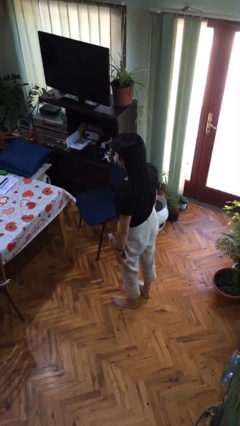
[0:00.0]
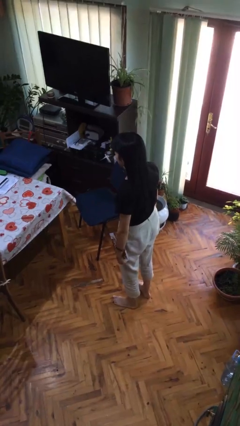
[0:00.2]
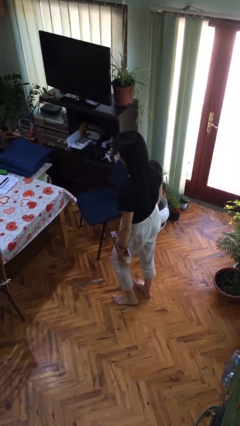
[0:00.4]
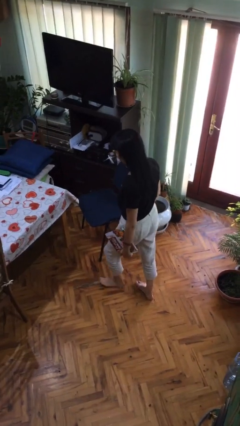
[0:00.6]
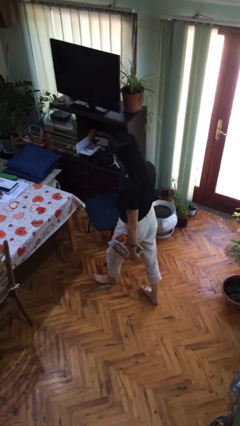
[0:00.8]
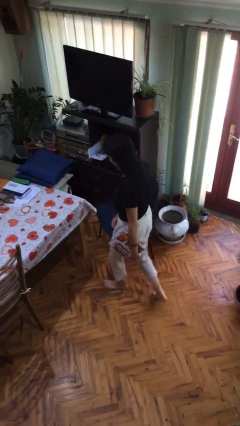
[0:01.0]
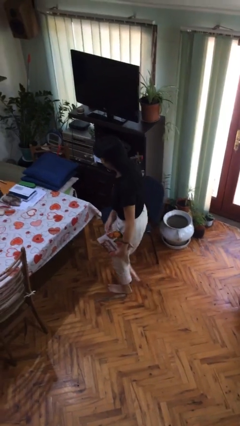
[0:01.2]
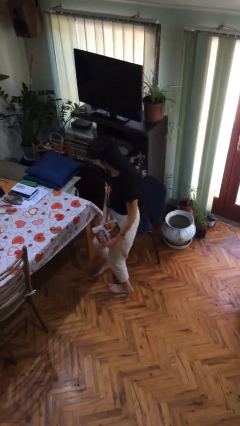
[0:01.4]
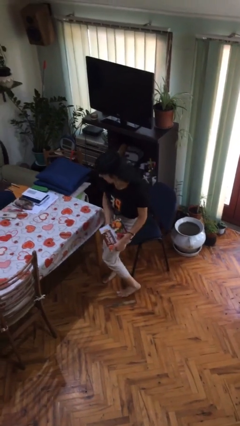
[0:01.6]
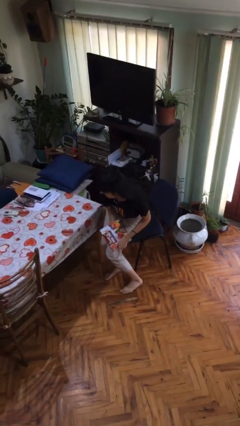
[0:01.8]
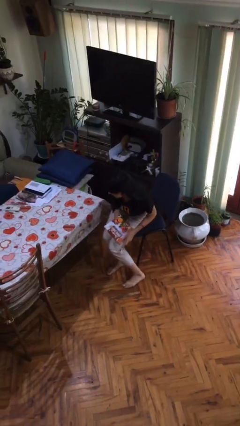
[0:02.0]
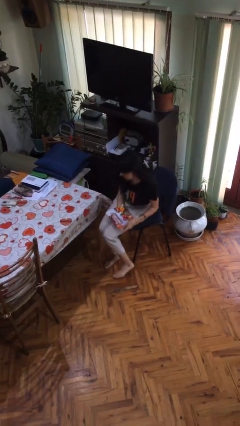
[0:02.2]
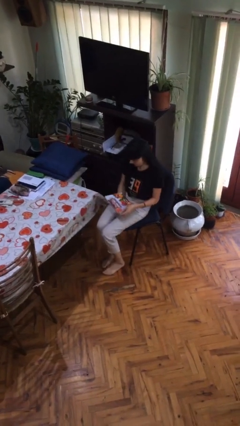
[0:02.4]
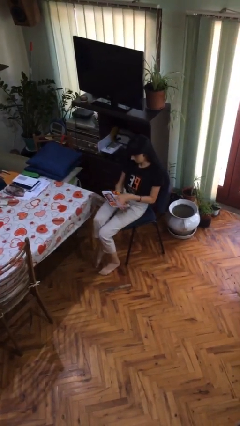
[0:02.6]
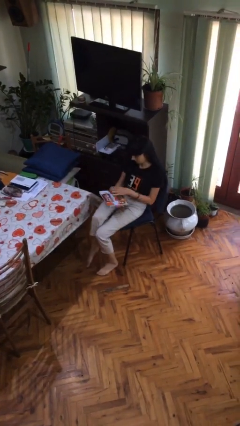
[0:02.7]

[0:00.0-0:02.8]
person sits down

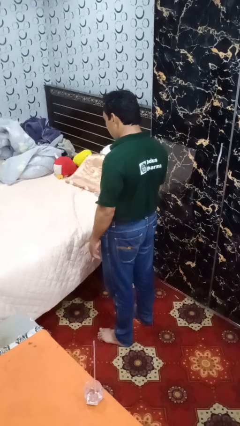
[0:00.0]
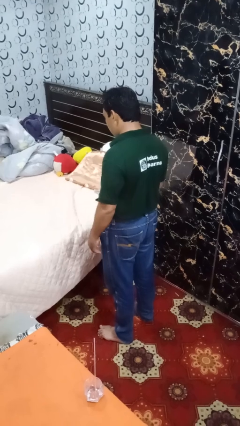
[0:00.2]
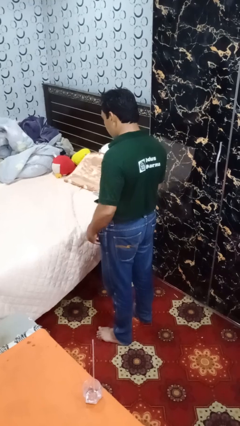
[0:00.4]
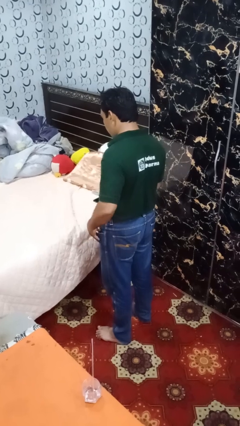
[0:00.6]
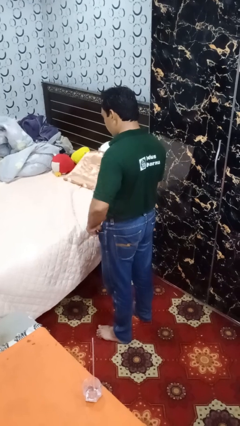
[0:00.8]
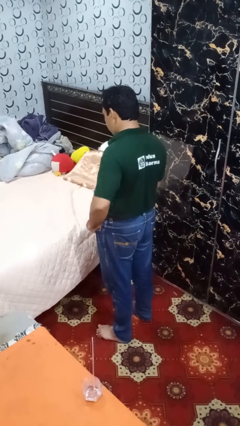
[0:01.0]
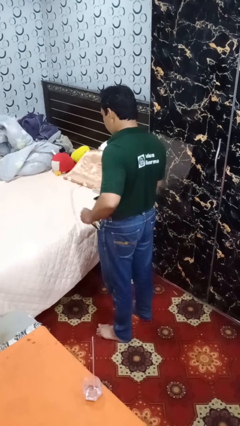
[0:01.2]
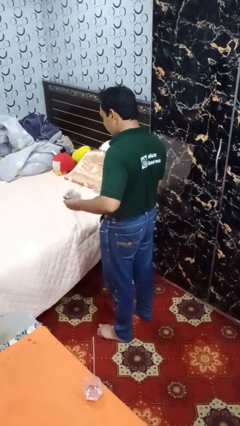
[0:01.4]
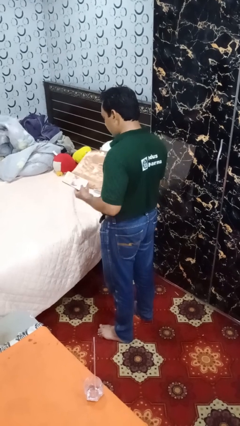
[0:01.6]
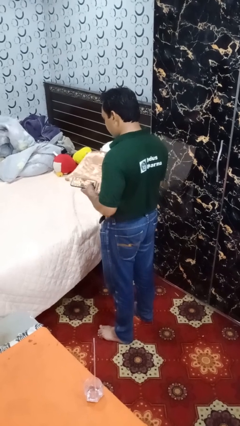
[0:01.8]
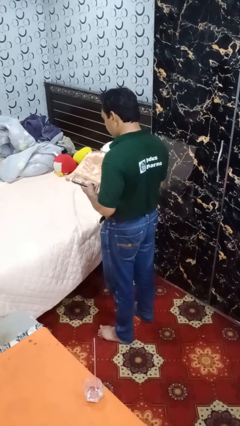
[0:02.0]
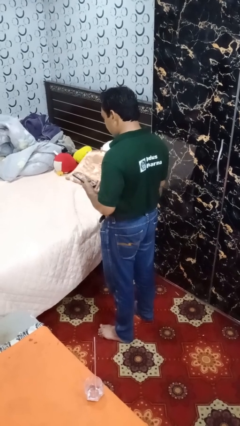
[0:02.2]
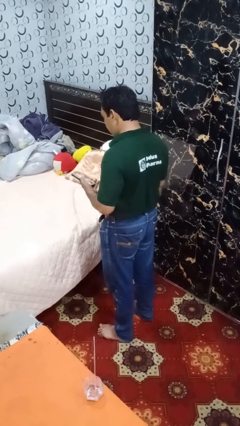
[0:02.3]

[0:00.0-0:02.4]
person takes phone from pocket

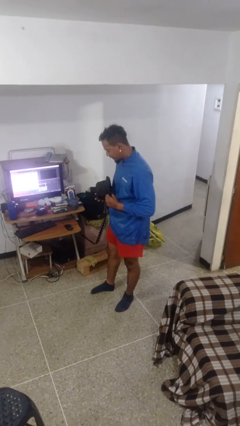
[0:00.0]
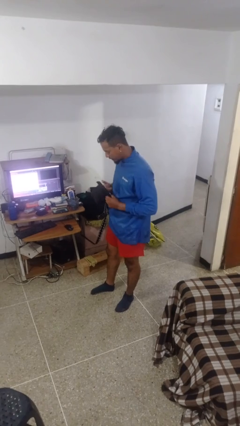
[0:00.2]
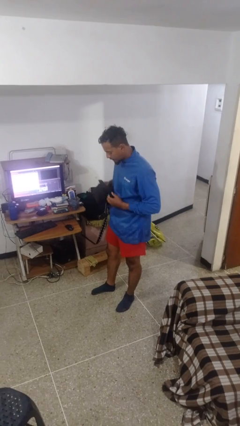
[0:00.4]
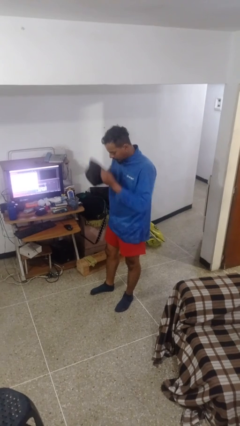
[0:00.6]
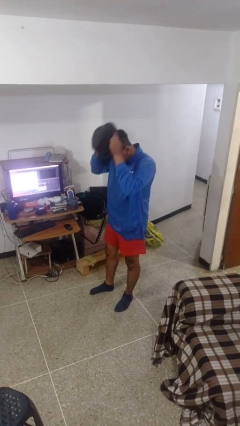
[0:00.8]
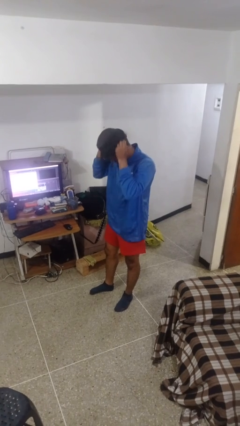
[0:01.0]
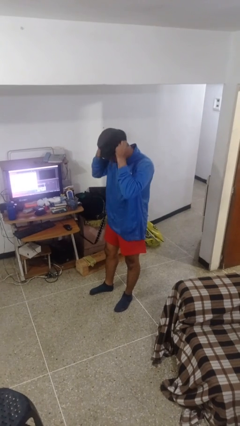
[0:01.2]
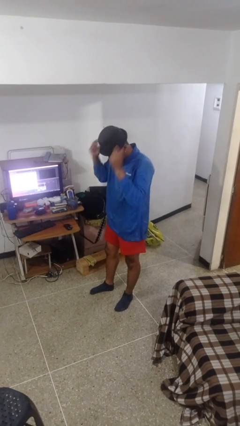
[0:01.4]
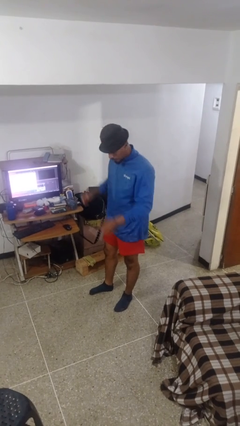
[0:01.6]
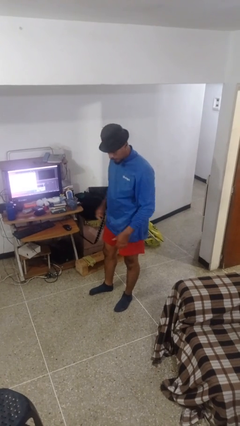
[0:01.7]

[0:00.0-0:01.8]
person puts on hat

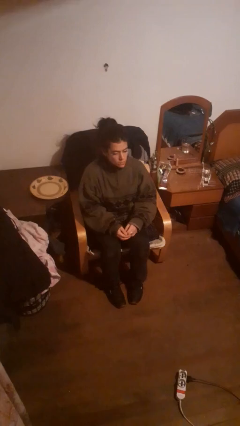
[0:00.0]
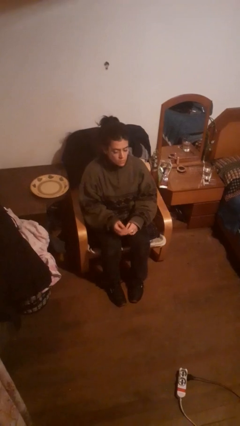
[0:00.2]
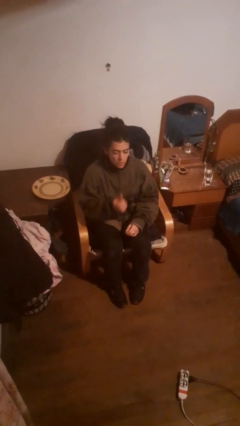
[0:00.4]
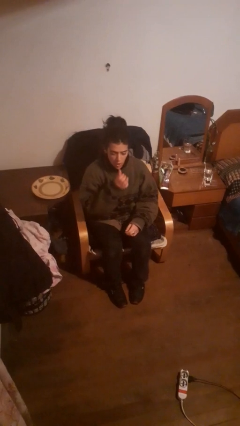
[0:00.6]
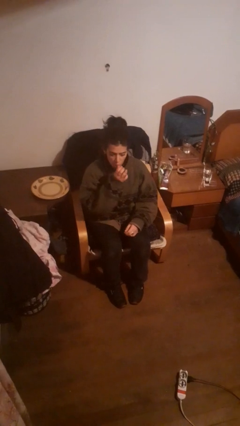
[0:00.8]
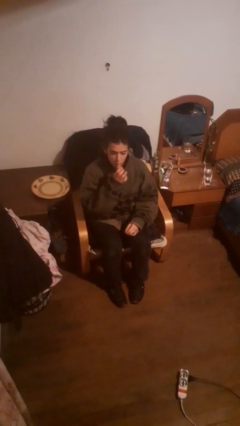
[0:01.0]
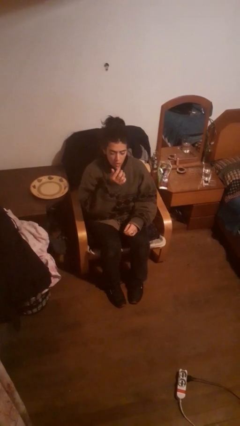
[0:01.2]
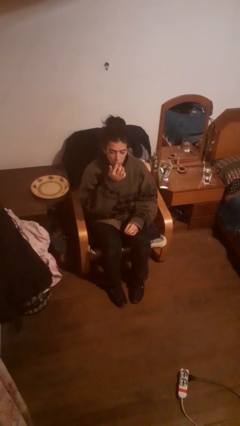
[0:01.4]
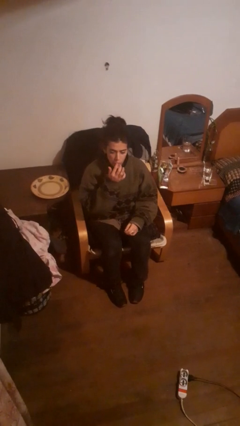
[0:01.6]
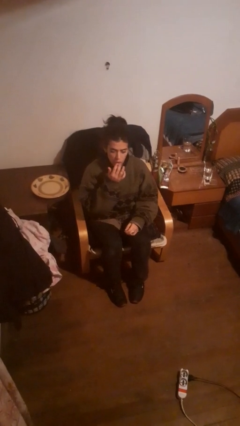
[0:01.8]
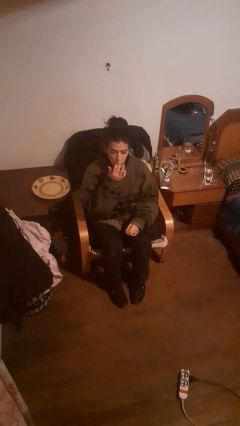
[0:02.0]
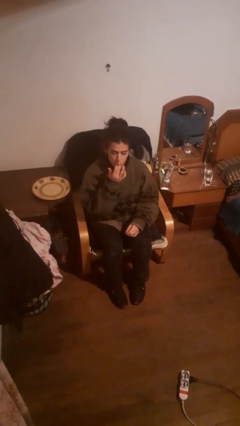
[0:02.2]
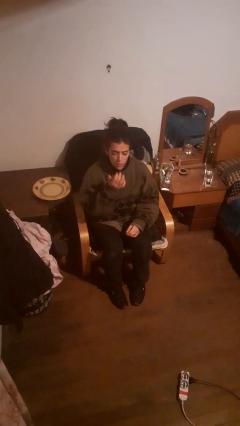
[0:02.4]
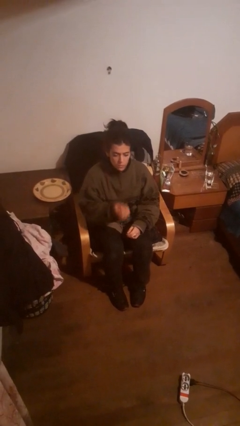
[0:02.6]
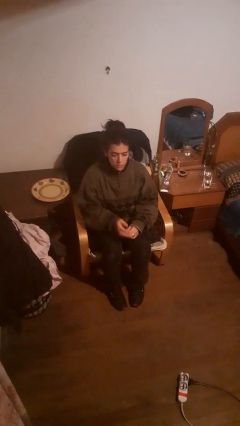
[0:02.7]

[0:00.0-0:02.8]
person licks fingers

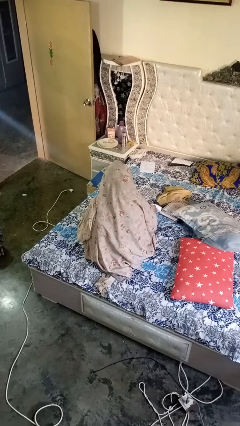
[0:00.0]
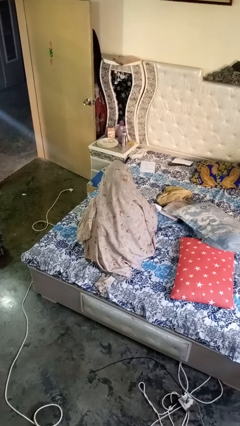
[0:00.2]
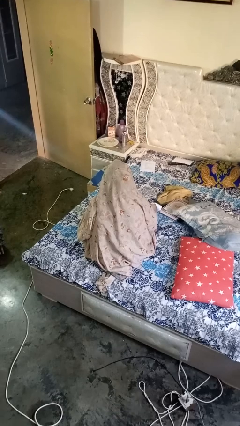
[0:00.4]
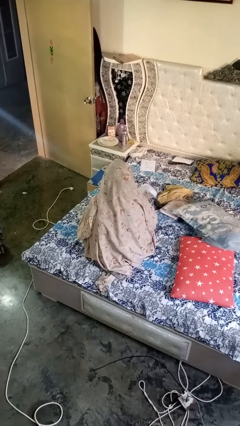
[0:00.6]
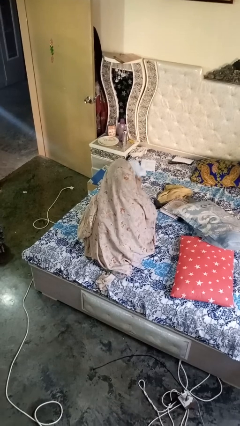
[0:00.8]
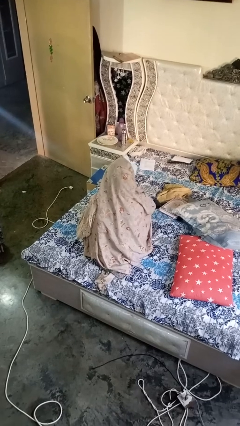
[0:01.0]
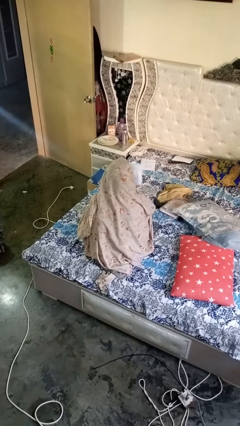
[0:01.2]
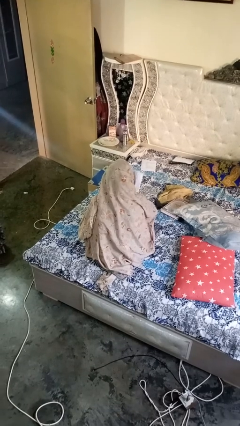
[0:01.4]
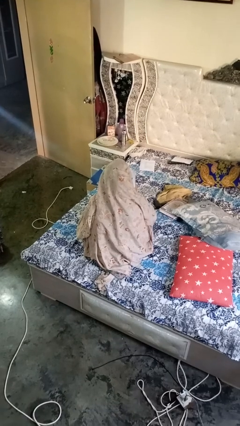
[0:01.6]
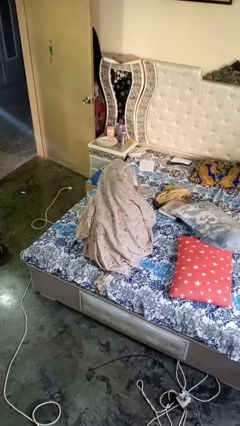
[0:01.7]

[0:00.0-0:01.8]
person wipes mouth with napkin

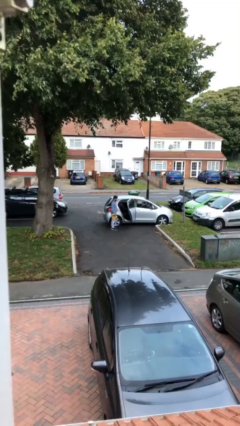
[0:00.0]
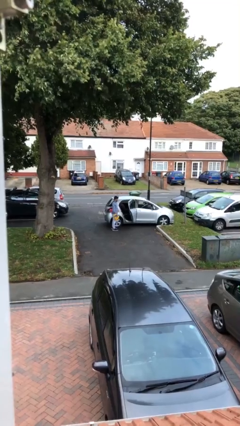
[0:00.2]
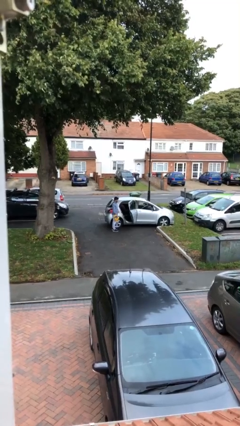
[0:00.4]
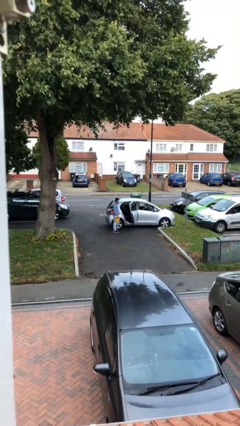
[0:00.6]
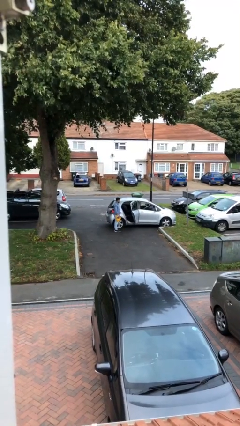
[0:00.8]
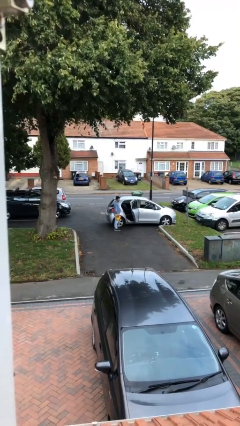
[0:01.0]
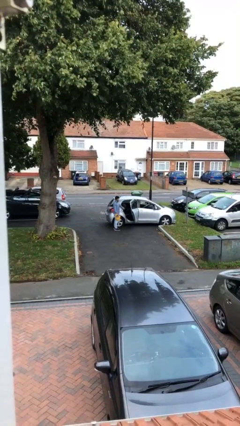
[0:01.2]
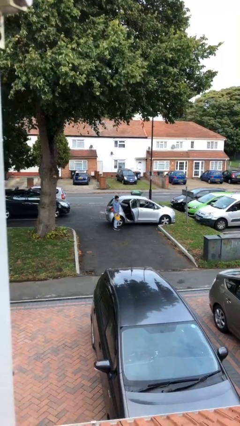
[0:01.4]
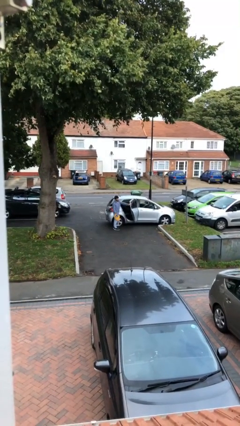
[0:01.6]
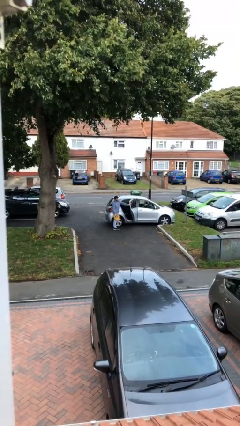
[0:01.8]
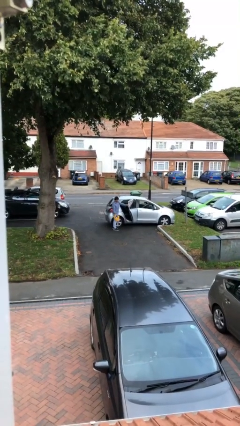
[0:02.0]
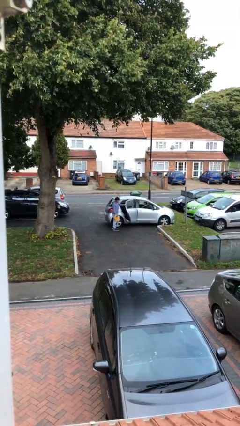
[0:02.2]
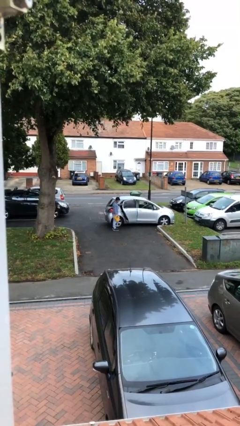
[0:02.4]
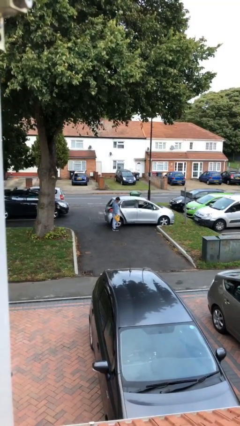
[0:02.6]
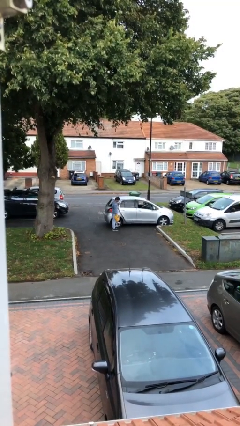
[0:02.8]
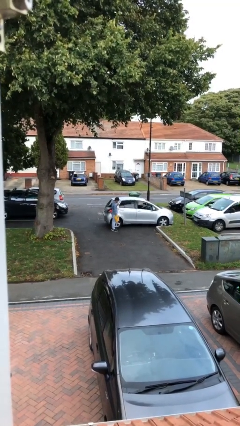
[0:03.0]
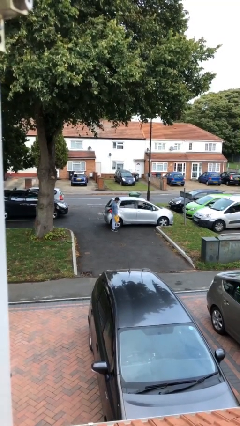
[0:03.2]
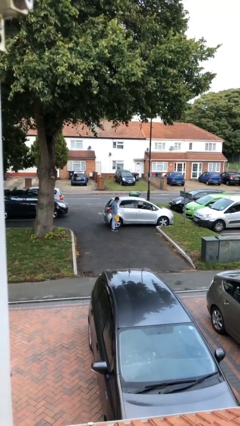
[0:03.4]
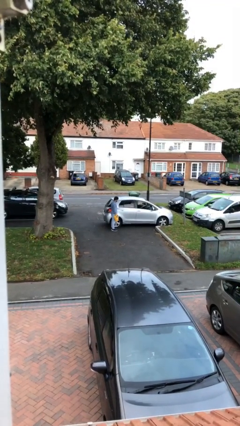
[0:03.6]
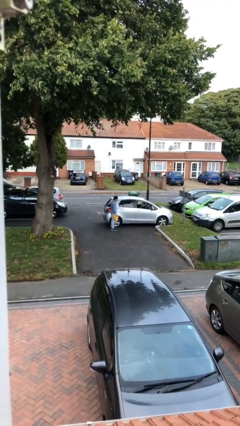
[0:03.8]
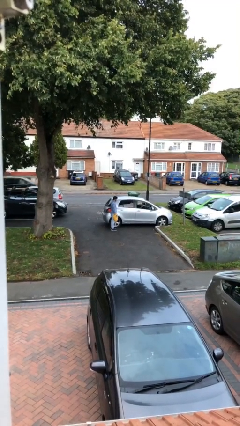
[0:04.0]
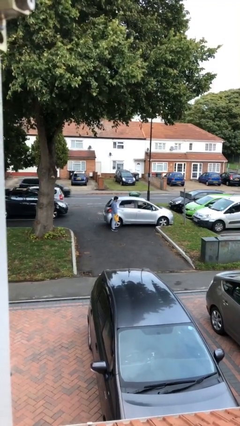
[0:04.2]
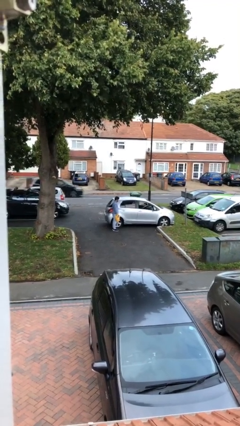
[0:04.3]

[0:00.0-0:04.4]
person closes car door

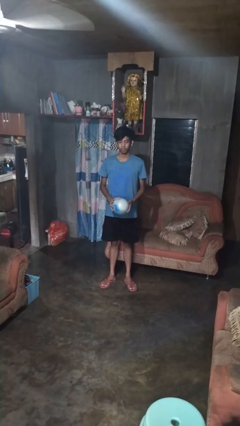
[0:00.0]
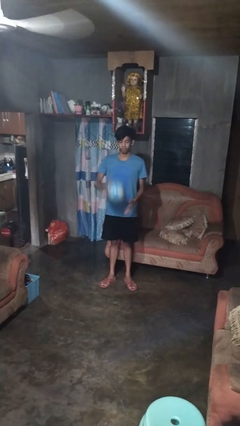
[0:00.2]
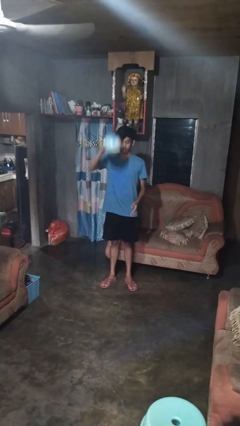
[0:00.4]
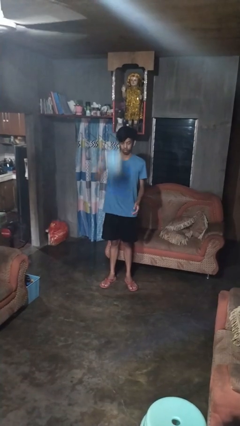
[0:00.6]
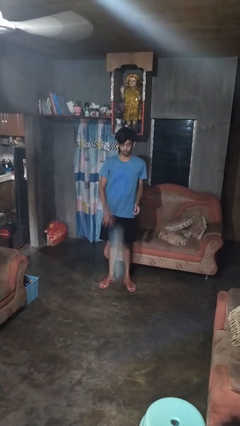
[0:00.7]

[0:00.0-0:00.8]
person bounces ball on floor
